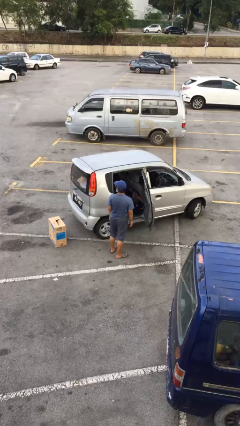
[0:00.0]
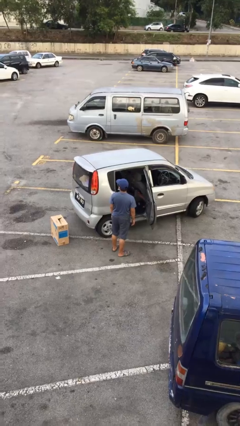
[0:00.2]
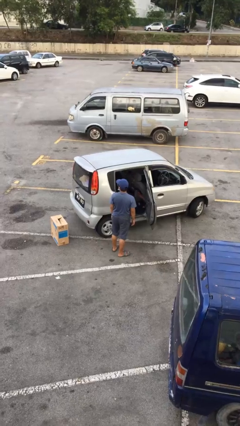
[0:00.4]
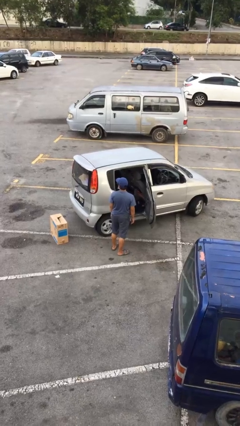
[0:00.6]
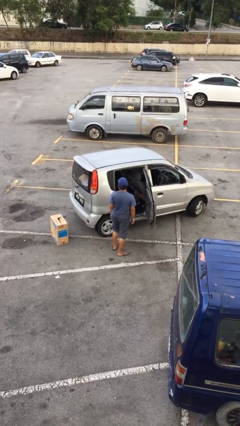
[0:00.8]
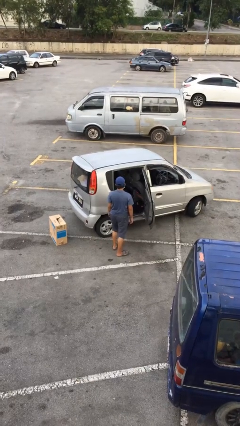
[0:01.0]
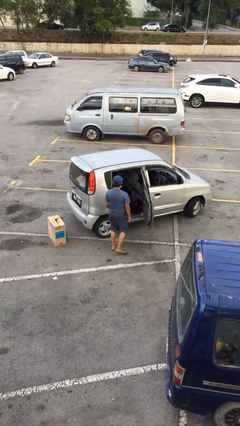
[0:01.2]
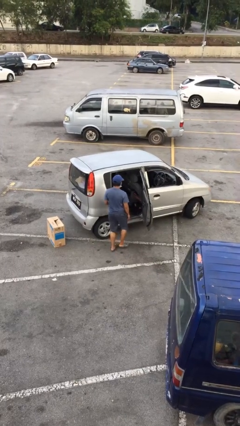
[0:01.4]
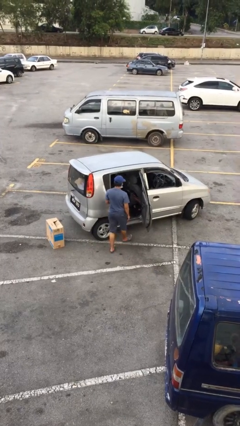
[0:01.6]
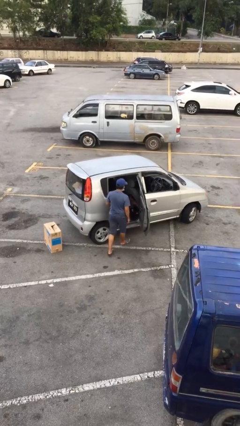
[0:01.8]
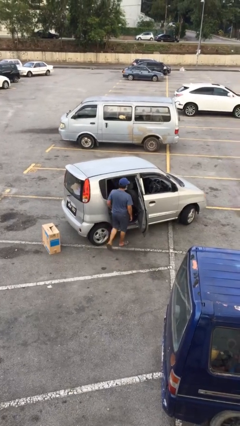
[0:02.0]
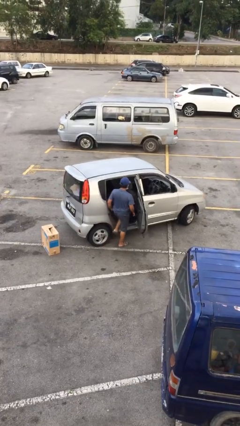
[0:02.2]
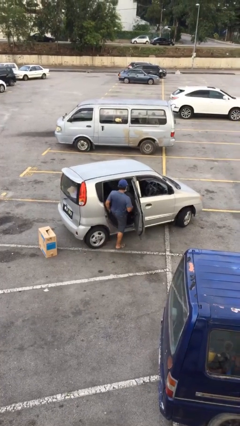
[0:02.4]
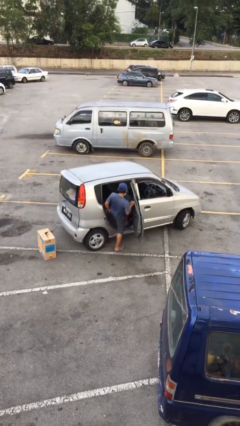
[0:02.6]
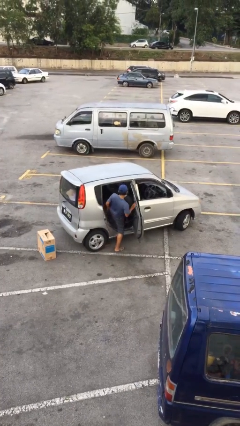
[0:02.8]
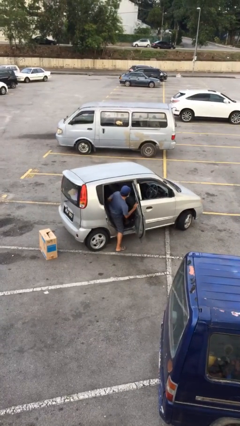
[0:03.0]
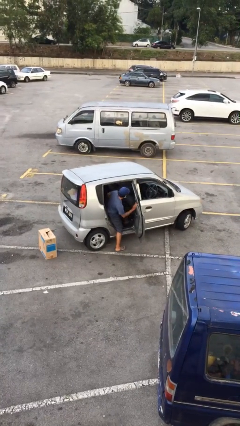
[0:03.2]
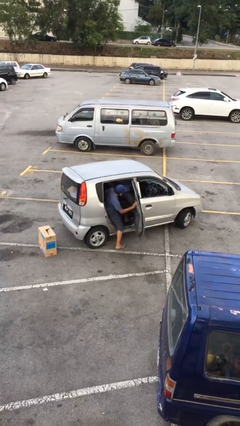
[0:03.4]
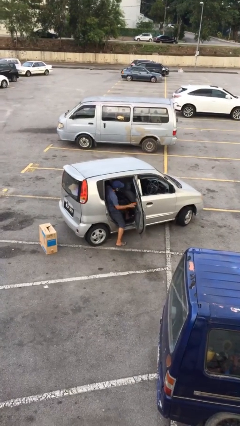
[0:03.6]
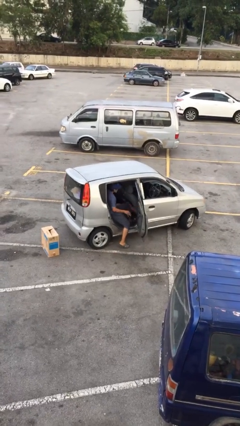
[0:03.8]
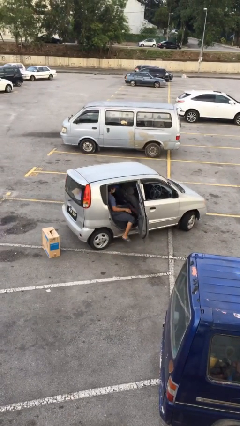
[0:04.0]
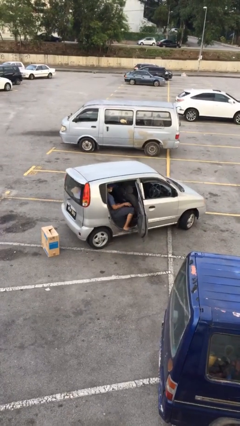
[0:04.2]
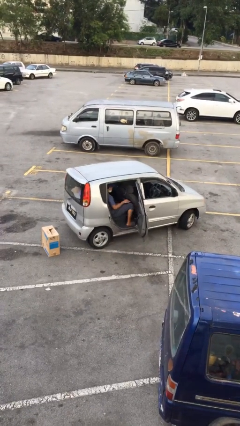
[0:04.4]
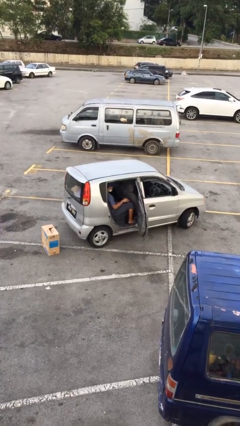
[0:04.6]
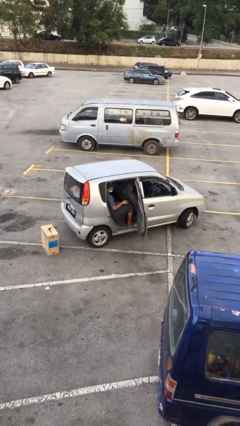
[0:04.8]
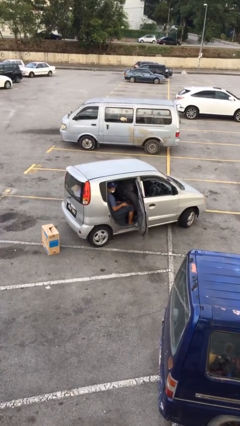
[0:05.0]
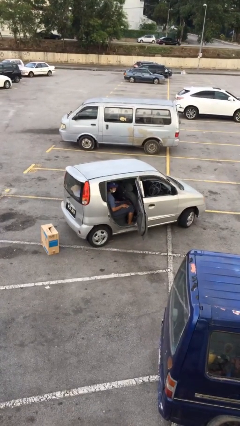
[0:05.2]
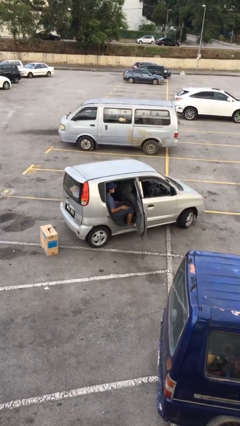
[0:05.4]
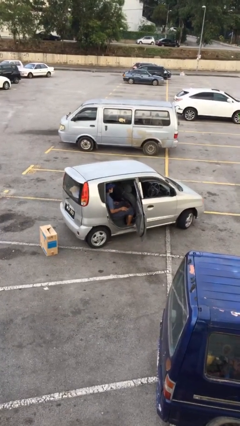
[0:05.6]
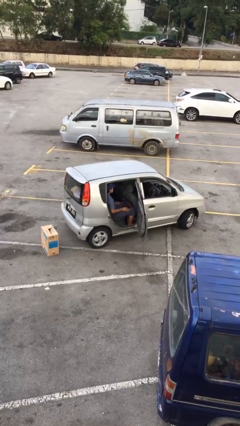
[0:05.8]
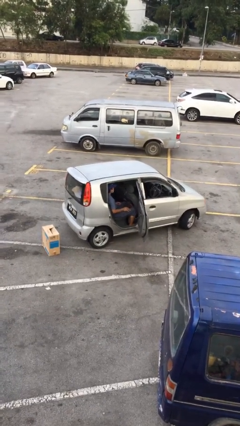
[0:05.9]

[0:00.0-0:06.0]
person enters car

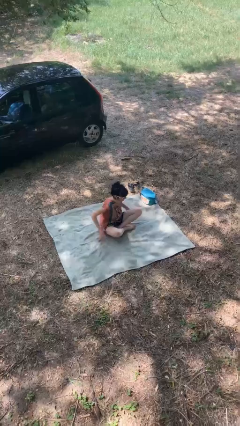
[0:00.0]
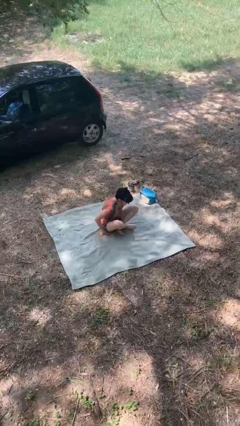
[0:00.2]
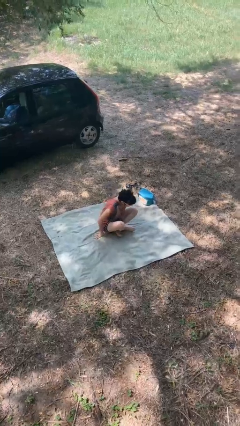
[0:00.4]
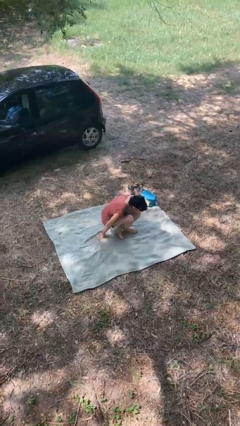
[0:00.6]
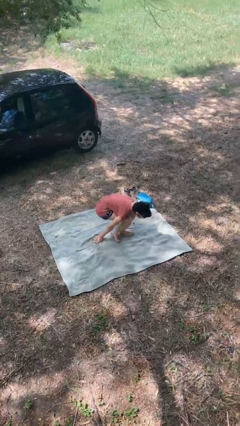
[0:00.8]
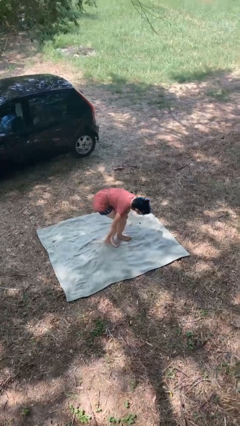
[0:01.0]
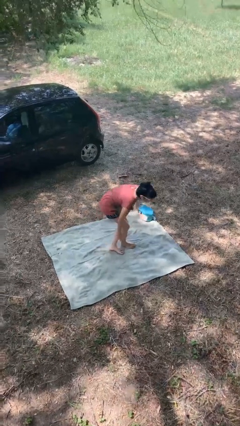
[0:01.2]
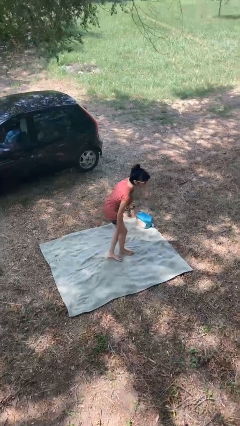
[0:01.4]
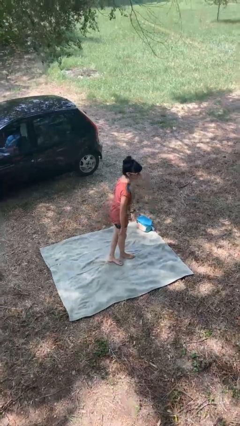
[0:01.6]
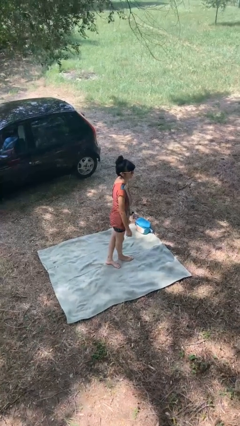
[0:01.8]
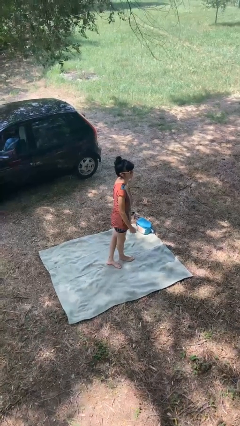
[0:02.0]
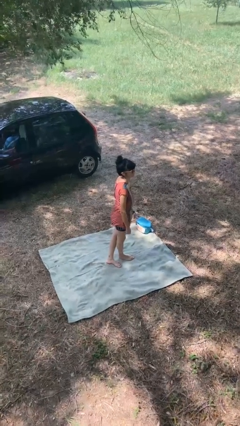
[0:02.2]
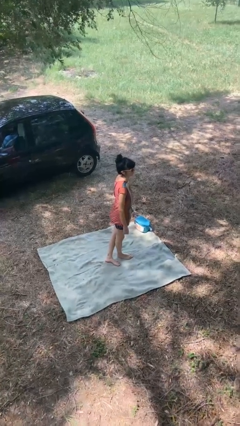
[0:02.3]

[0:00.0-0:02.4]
person stands up from floor

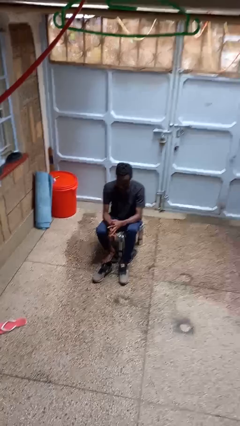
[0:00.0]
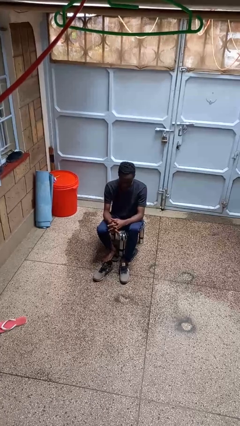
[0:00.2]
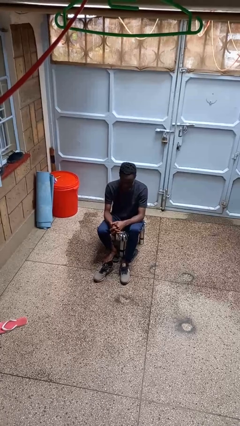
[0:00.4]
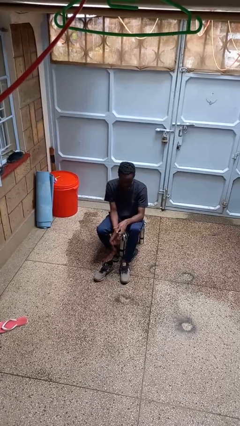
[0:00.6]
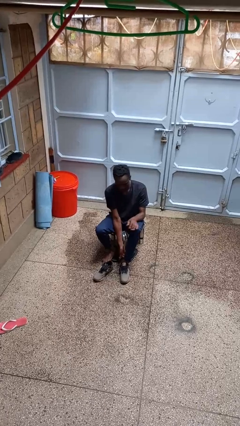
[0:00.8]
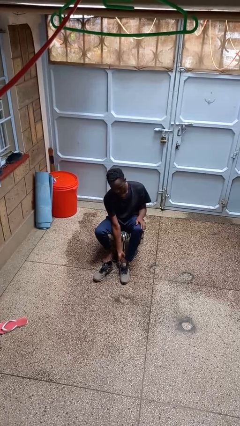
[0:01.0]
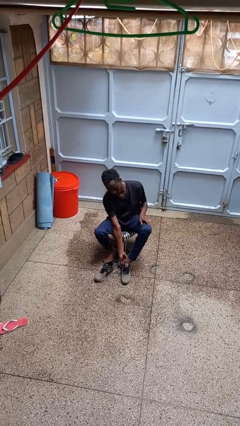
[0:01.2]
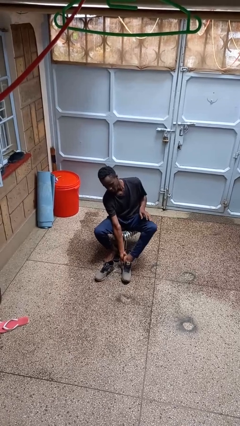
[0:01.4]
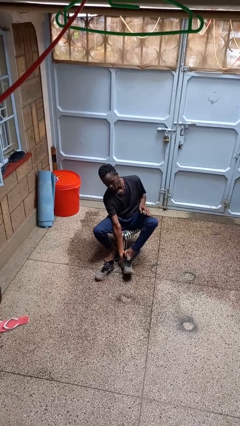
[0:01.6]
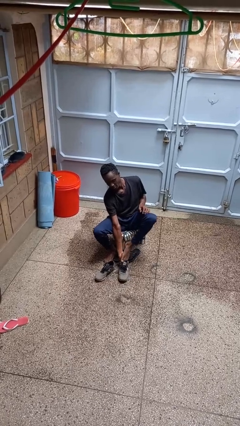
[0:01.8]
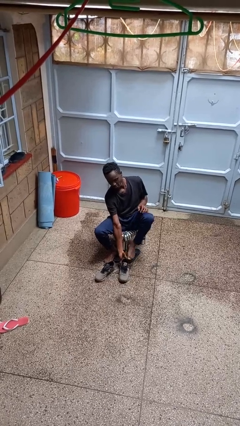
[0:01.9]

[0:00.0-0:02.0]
person takes off shoes

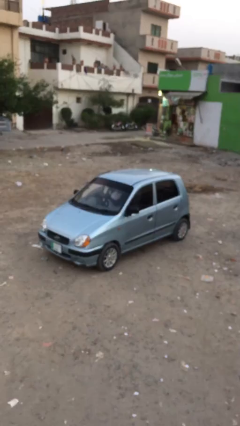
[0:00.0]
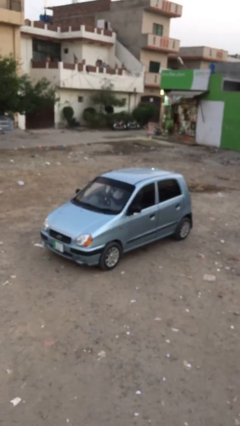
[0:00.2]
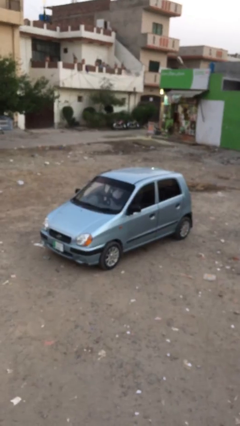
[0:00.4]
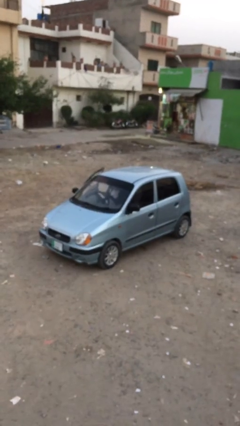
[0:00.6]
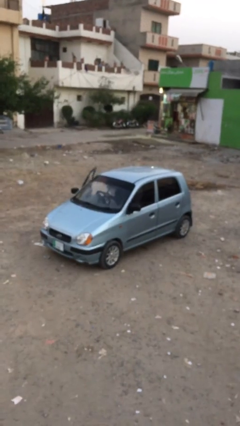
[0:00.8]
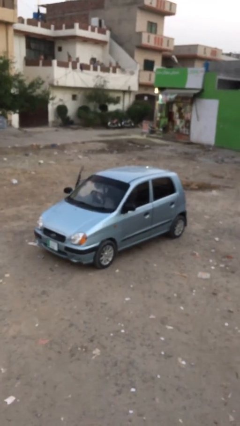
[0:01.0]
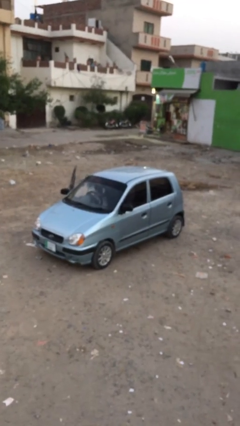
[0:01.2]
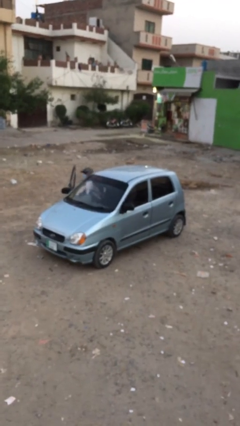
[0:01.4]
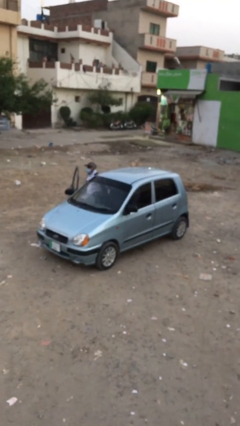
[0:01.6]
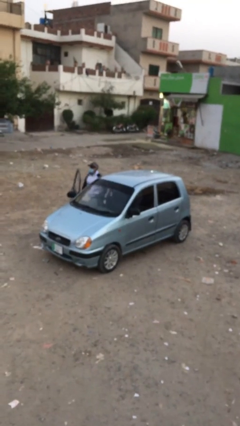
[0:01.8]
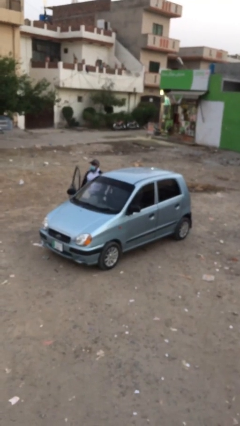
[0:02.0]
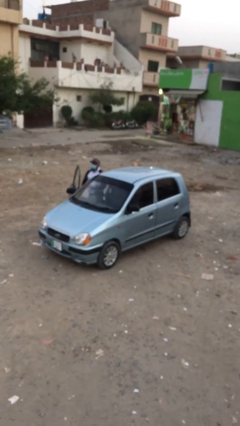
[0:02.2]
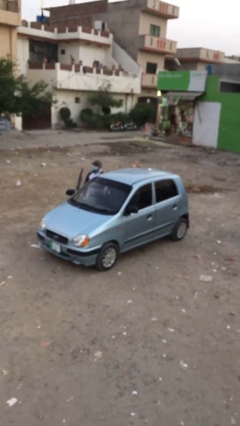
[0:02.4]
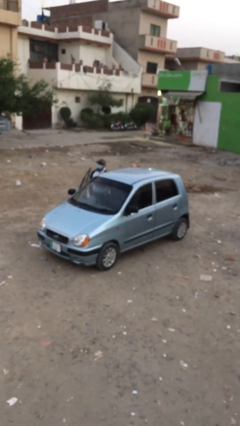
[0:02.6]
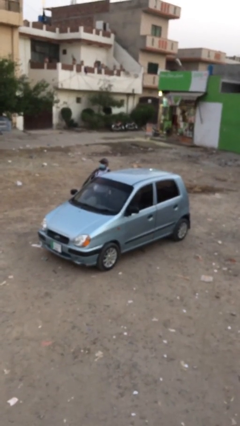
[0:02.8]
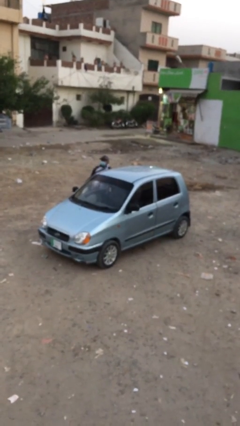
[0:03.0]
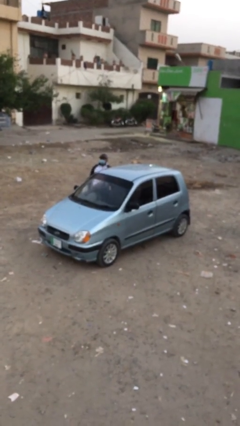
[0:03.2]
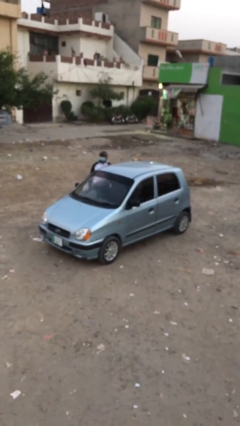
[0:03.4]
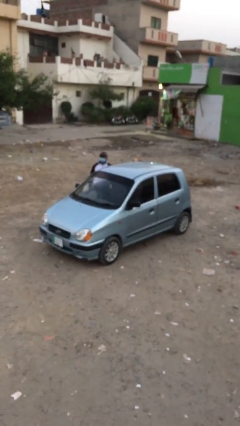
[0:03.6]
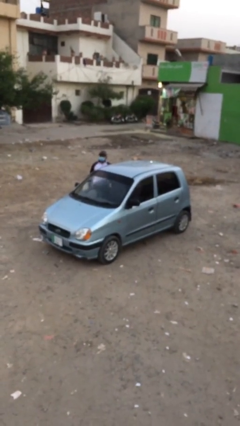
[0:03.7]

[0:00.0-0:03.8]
car drops off person

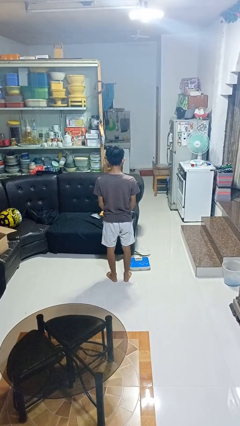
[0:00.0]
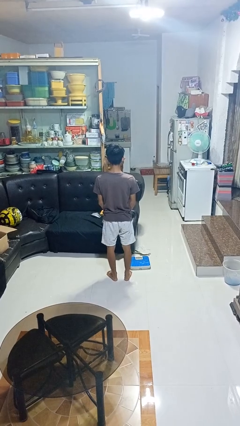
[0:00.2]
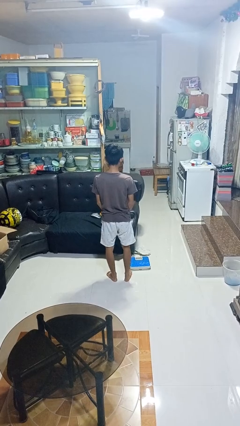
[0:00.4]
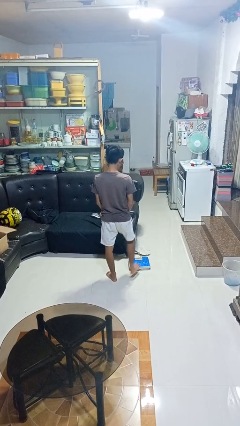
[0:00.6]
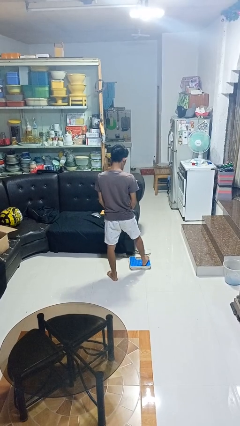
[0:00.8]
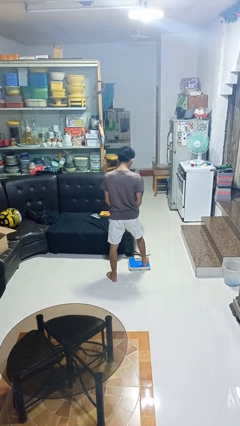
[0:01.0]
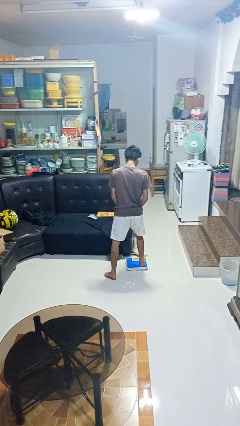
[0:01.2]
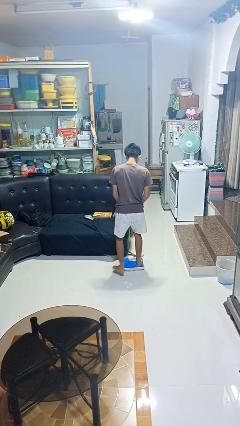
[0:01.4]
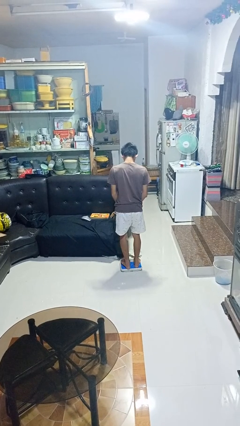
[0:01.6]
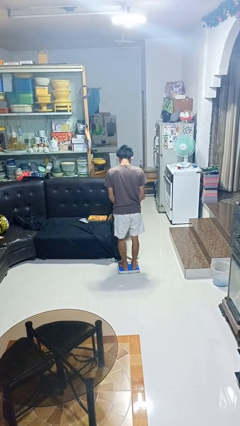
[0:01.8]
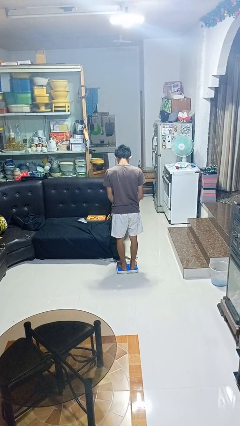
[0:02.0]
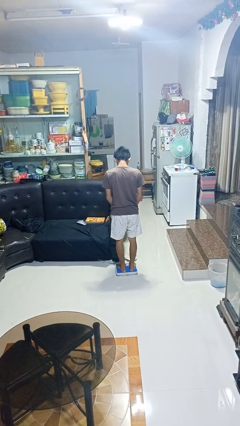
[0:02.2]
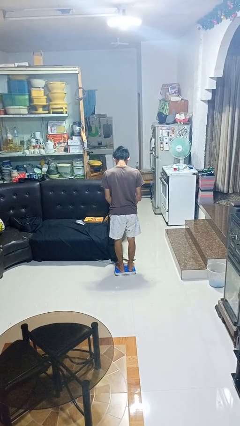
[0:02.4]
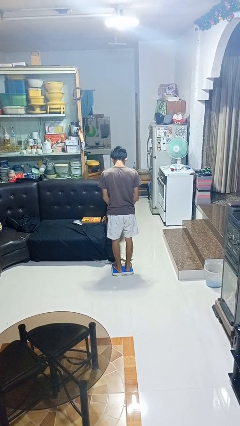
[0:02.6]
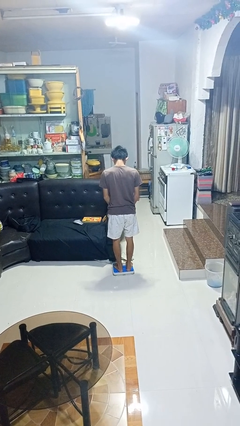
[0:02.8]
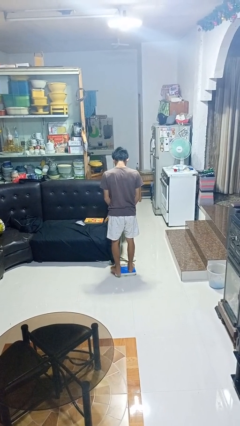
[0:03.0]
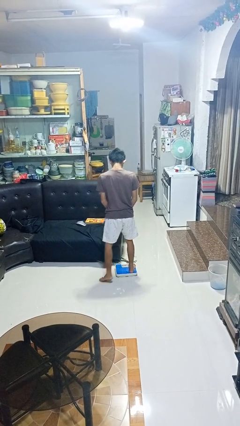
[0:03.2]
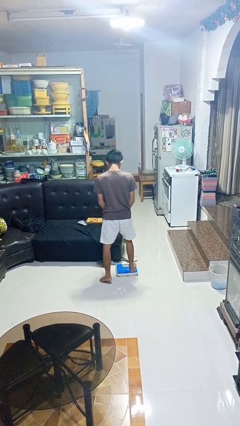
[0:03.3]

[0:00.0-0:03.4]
person uses bodyweight scale
